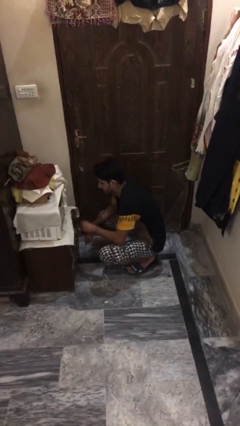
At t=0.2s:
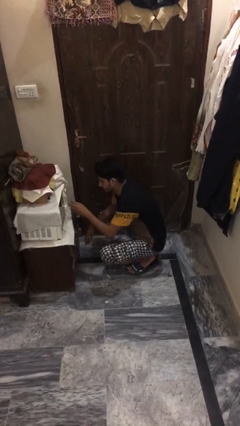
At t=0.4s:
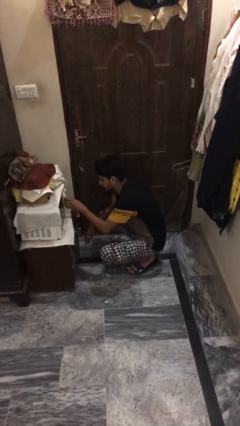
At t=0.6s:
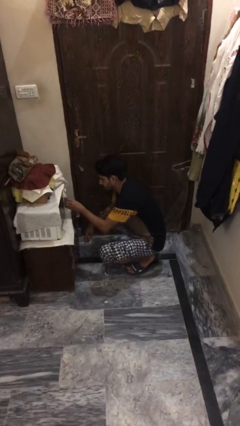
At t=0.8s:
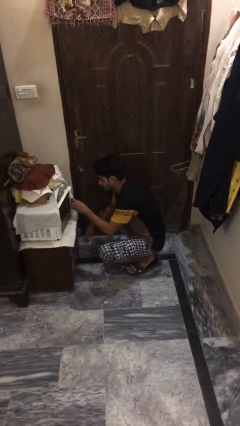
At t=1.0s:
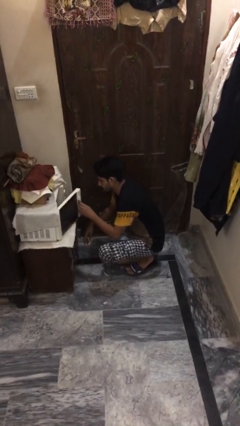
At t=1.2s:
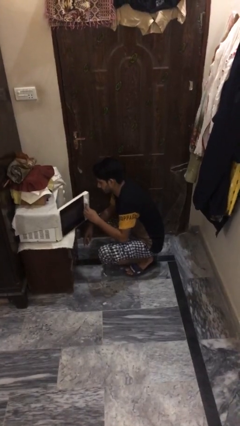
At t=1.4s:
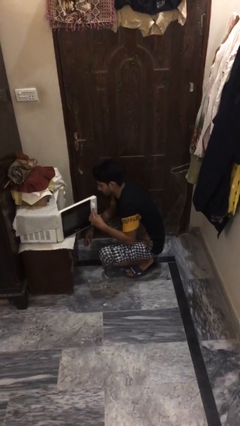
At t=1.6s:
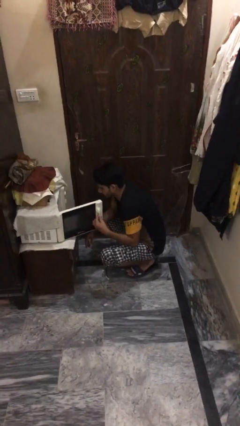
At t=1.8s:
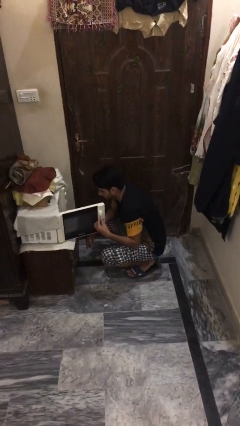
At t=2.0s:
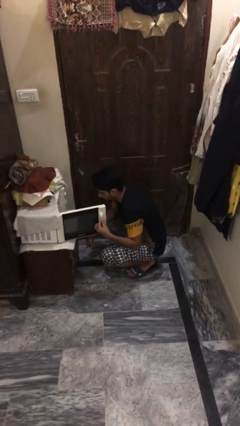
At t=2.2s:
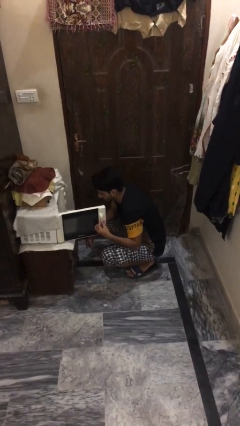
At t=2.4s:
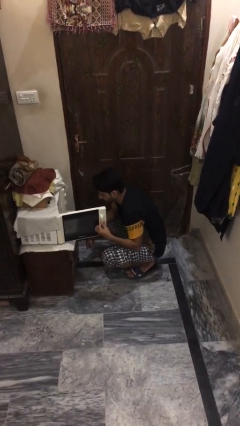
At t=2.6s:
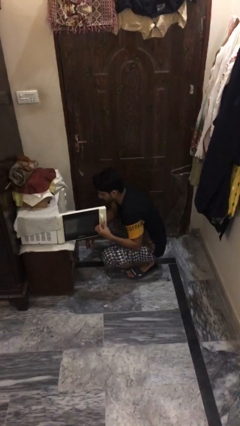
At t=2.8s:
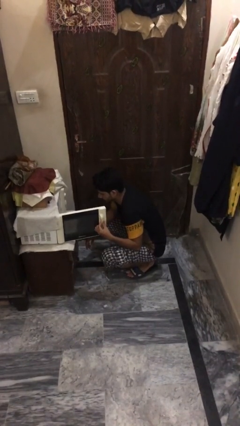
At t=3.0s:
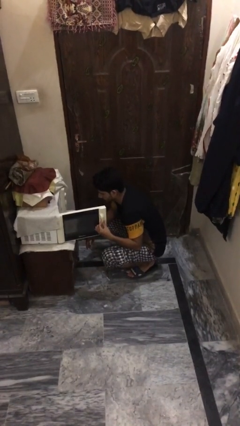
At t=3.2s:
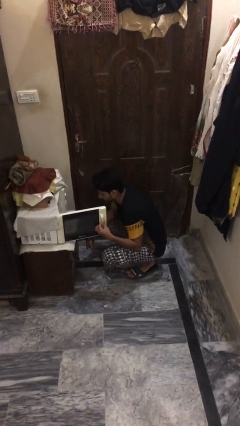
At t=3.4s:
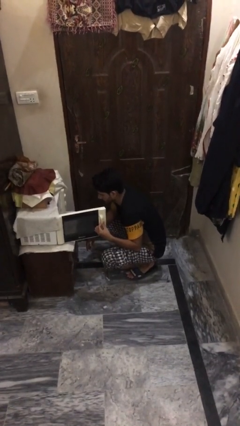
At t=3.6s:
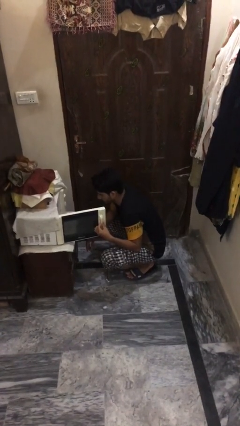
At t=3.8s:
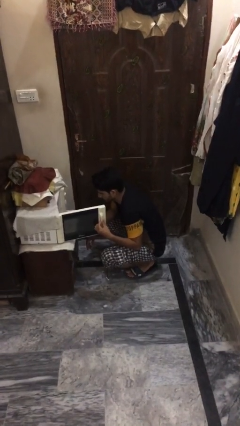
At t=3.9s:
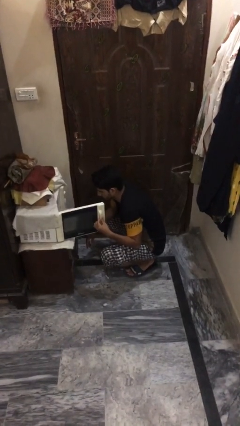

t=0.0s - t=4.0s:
person opens microwave

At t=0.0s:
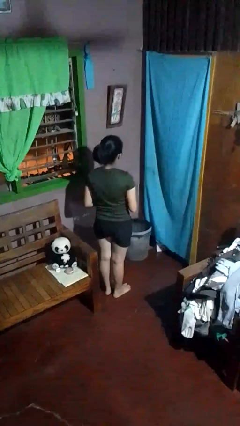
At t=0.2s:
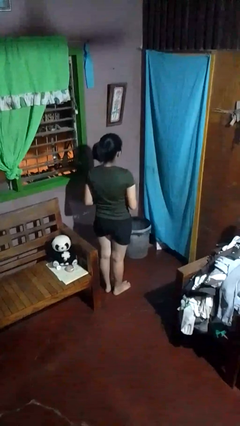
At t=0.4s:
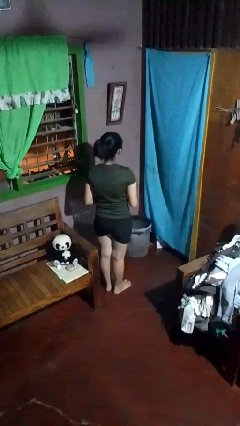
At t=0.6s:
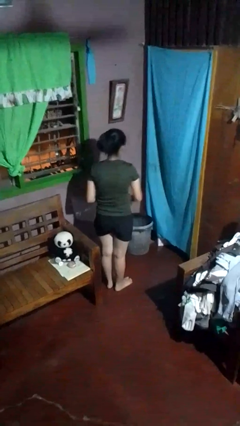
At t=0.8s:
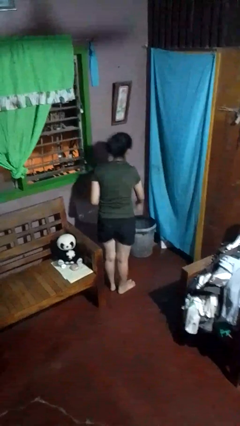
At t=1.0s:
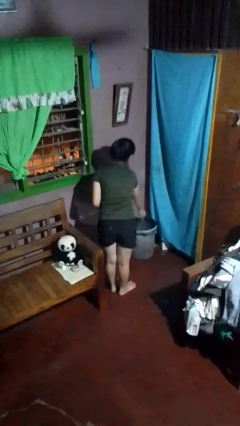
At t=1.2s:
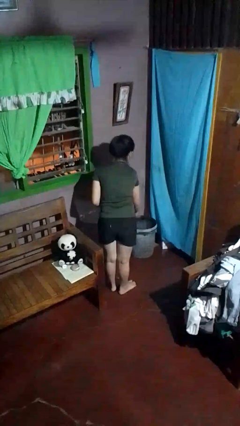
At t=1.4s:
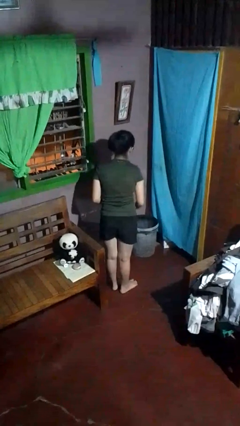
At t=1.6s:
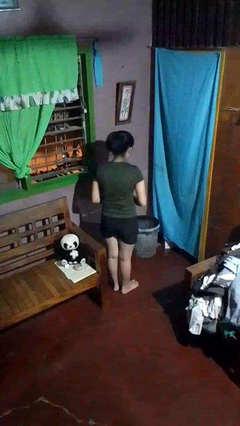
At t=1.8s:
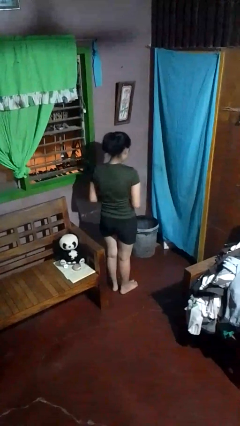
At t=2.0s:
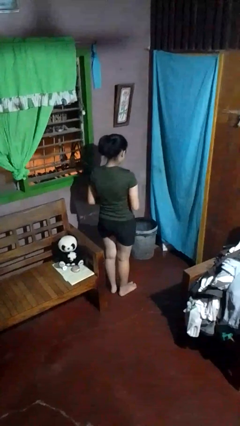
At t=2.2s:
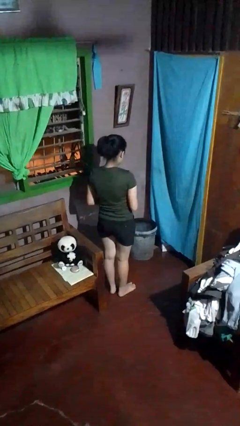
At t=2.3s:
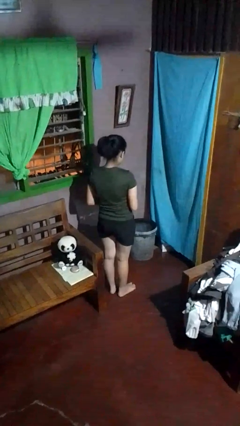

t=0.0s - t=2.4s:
person discards trash

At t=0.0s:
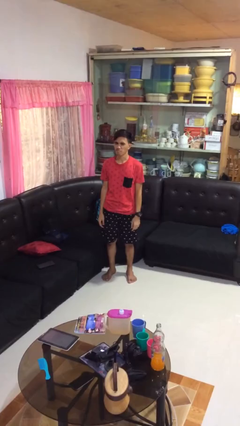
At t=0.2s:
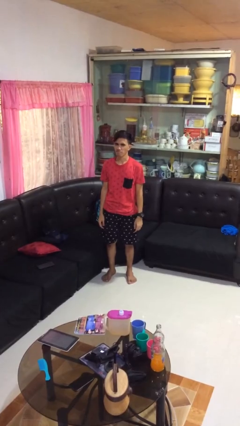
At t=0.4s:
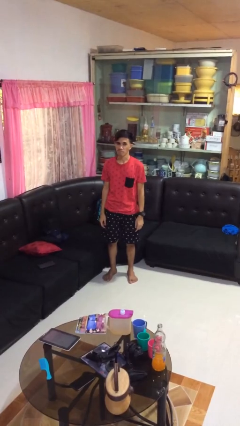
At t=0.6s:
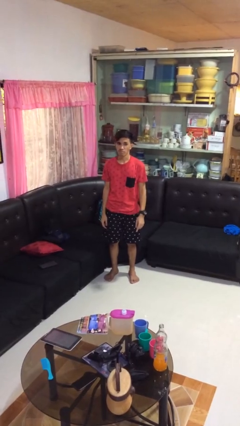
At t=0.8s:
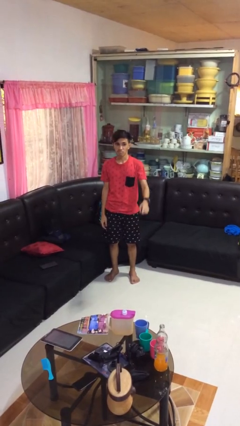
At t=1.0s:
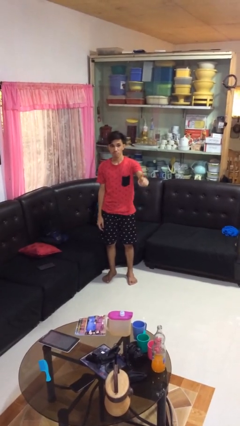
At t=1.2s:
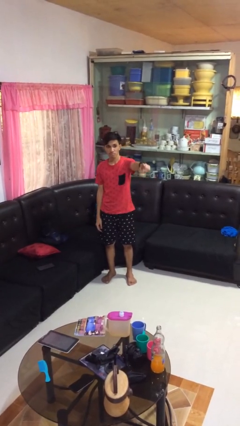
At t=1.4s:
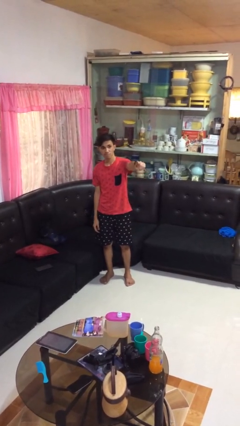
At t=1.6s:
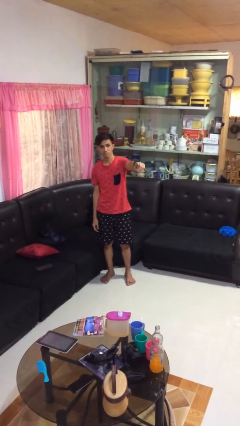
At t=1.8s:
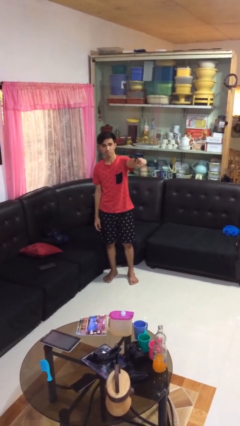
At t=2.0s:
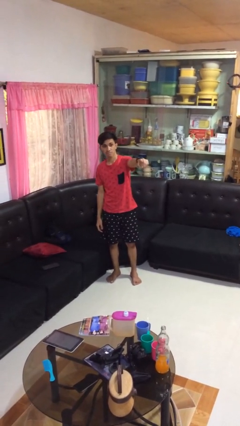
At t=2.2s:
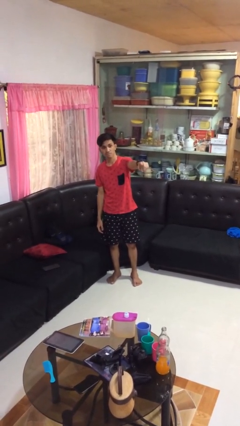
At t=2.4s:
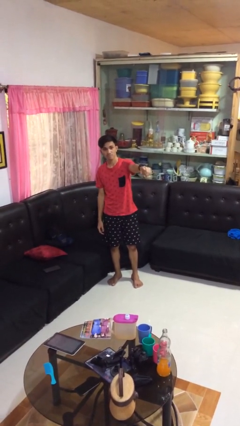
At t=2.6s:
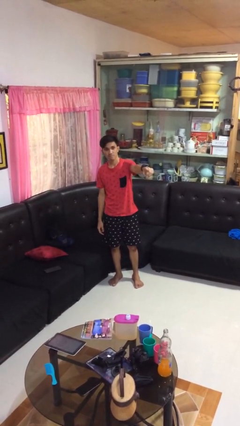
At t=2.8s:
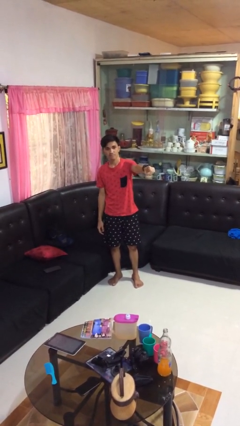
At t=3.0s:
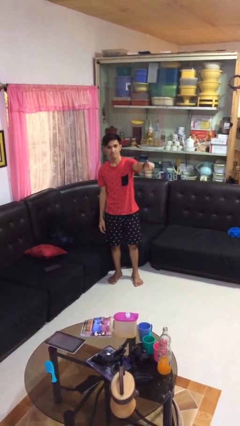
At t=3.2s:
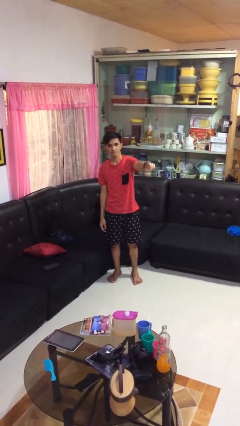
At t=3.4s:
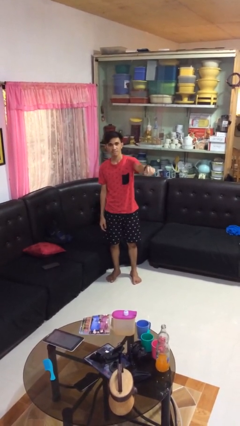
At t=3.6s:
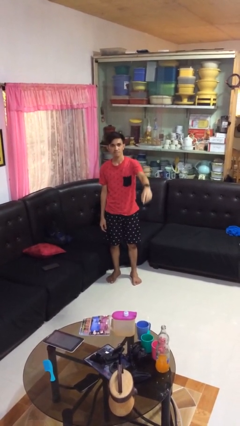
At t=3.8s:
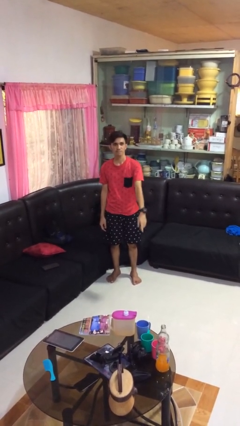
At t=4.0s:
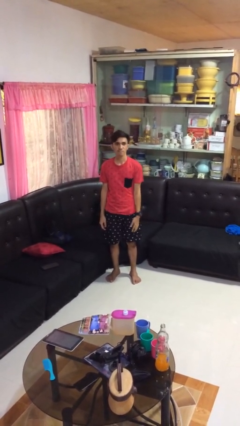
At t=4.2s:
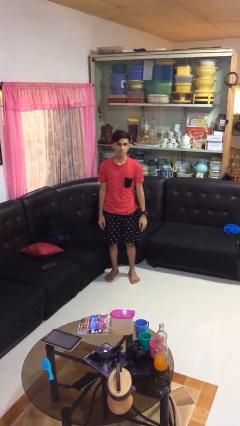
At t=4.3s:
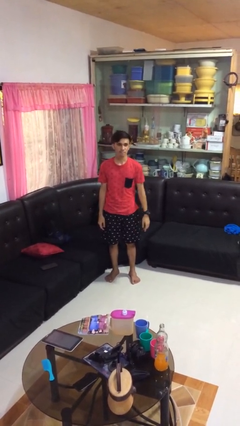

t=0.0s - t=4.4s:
person points at person

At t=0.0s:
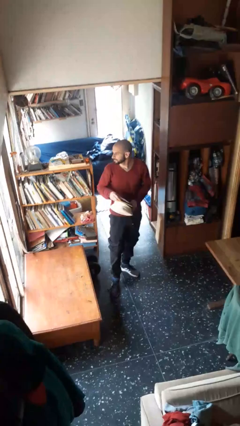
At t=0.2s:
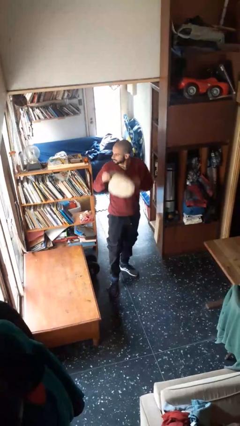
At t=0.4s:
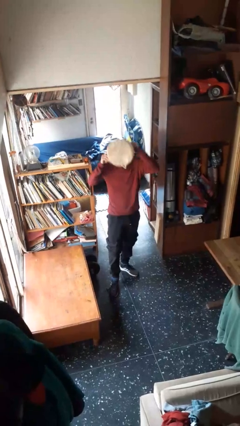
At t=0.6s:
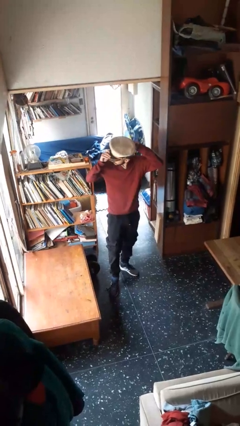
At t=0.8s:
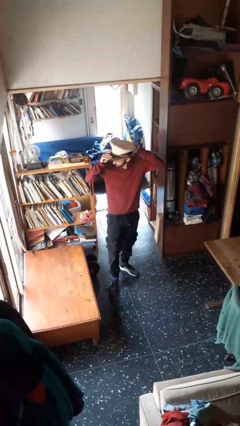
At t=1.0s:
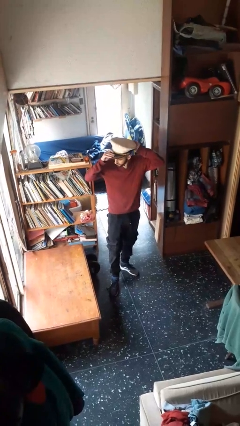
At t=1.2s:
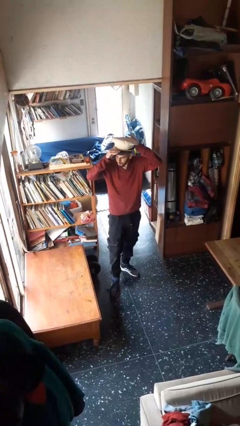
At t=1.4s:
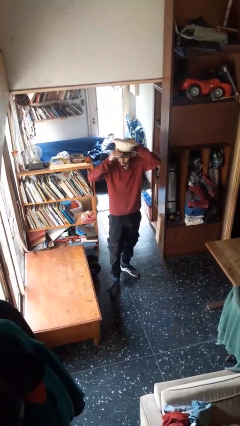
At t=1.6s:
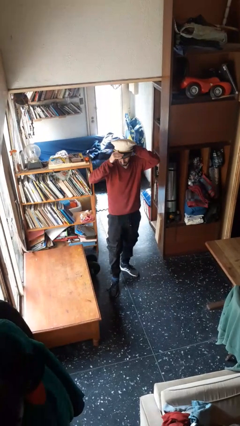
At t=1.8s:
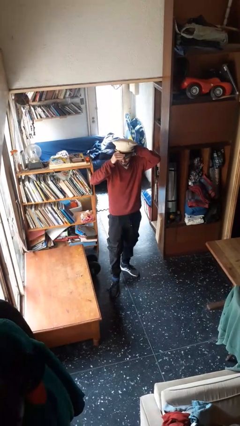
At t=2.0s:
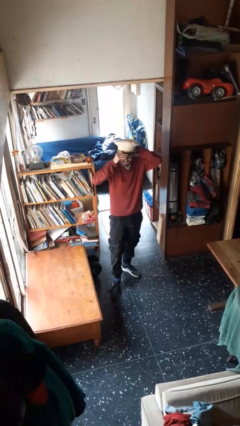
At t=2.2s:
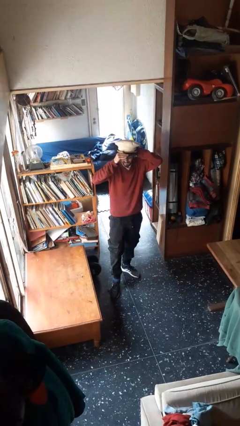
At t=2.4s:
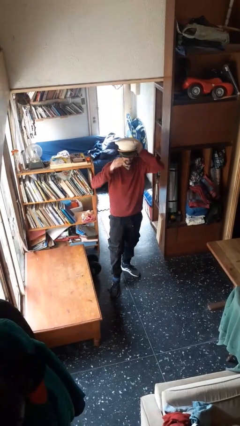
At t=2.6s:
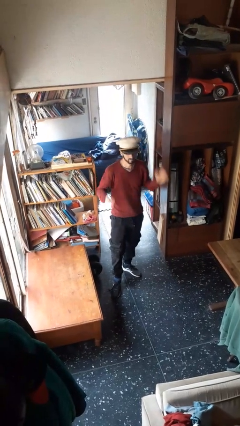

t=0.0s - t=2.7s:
person puts on hat

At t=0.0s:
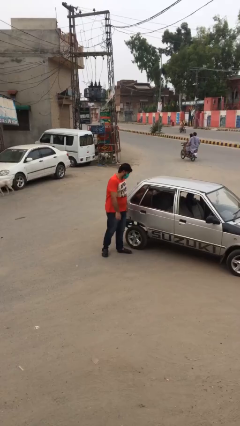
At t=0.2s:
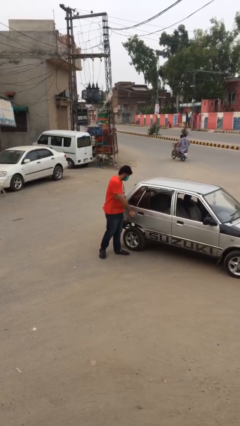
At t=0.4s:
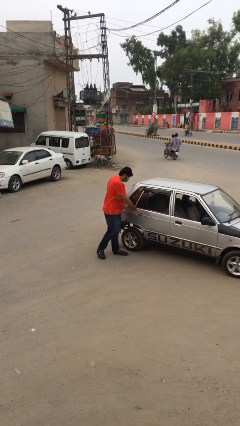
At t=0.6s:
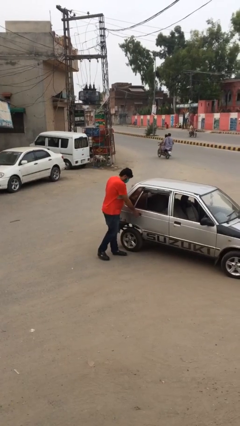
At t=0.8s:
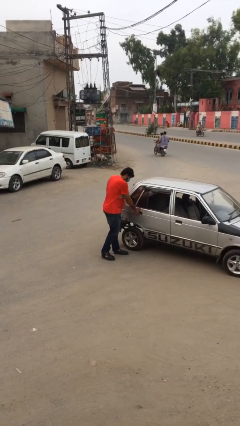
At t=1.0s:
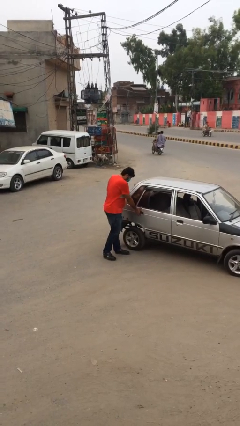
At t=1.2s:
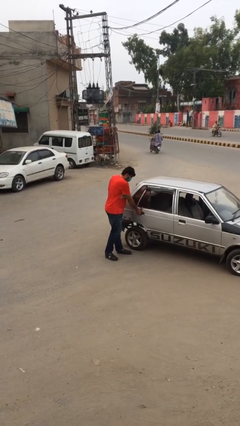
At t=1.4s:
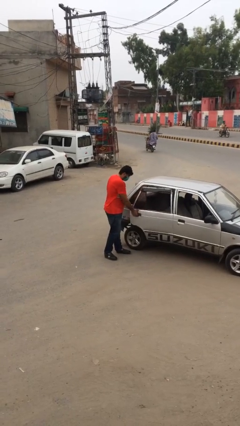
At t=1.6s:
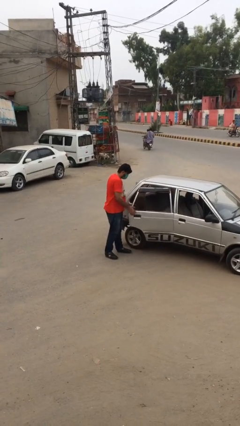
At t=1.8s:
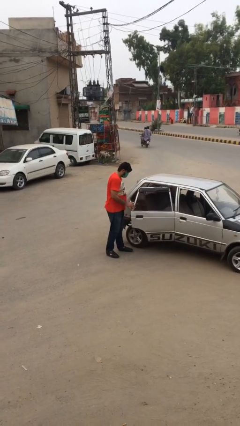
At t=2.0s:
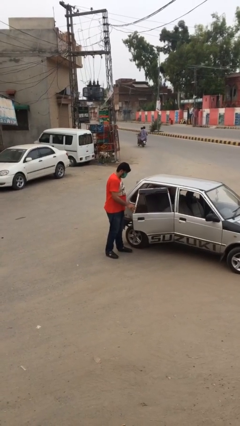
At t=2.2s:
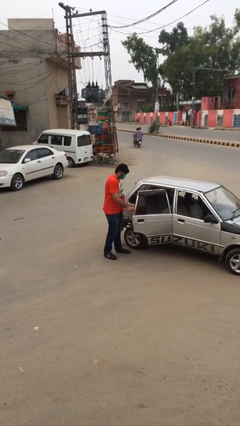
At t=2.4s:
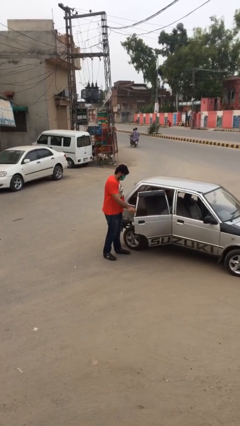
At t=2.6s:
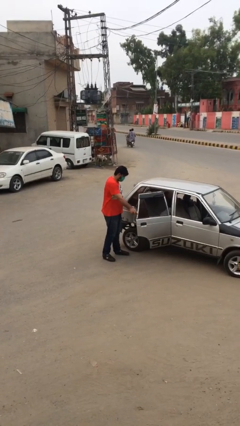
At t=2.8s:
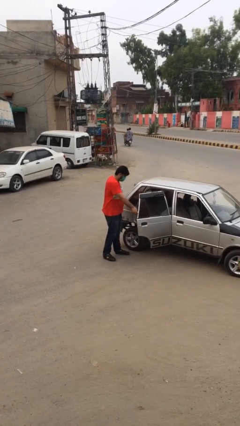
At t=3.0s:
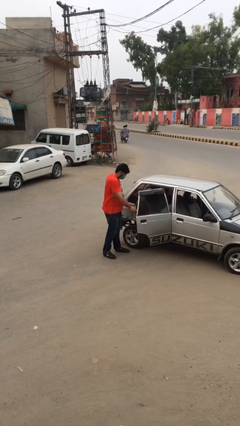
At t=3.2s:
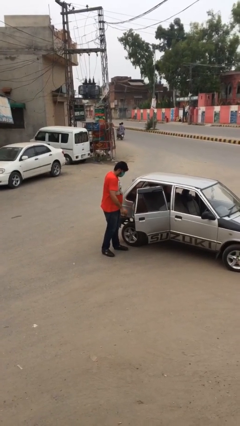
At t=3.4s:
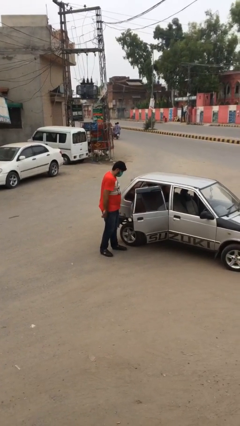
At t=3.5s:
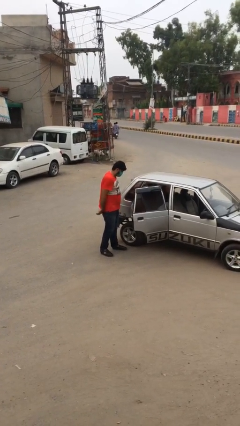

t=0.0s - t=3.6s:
person opens car door

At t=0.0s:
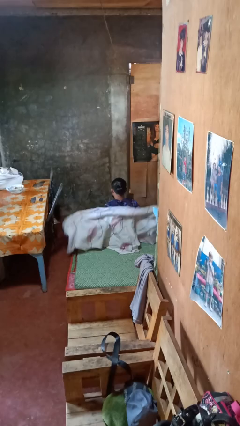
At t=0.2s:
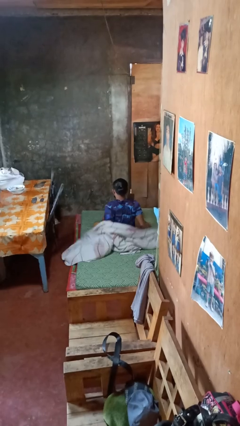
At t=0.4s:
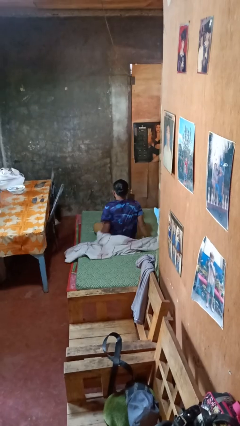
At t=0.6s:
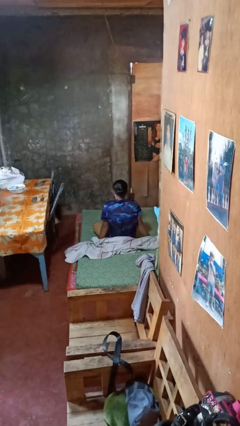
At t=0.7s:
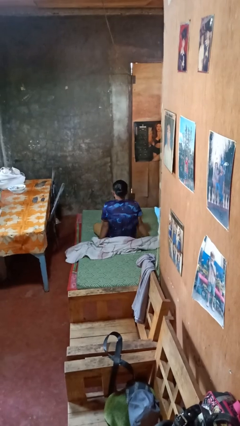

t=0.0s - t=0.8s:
person uncovers with blanket
